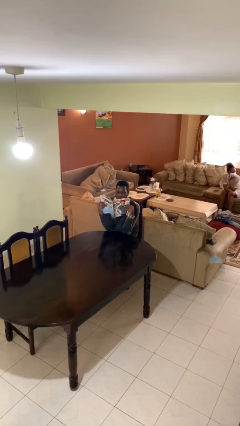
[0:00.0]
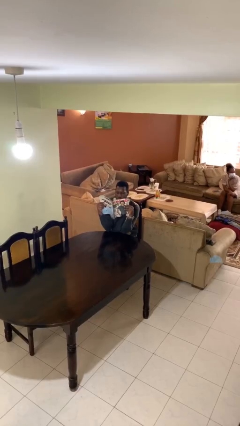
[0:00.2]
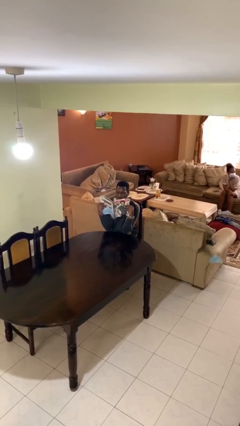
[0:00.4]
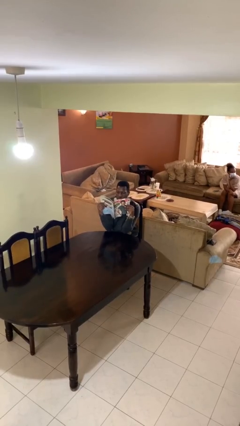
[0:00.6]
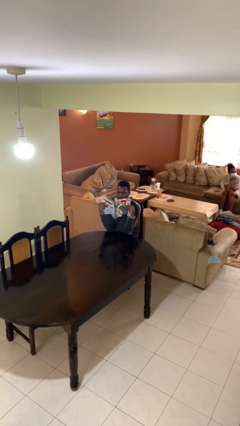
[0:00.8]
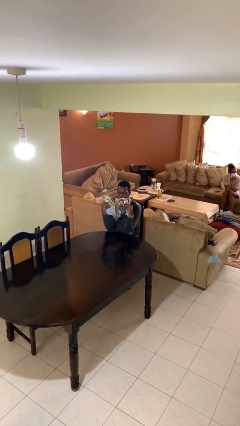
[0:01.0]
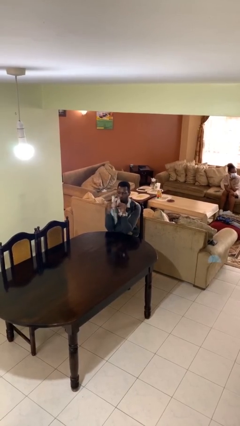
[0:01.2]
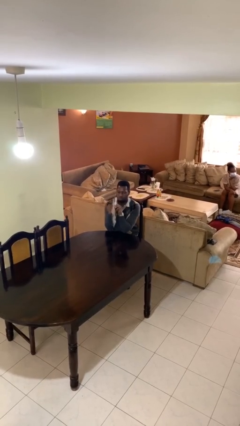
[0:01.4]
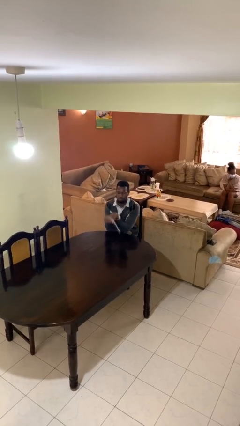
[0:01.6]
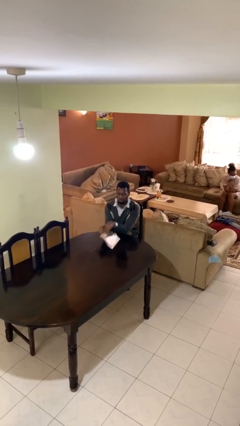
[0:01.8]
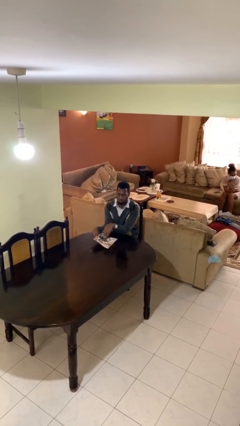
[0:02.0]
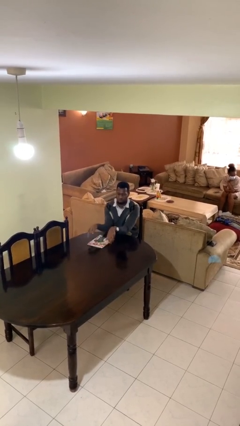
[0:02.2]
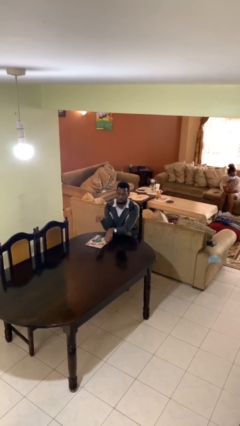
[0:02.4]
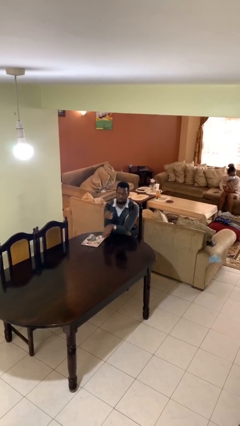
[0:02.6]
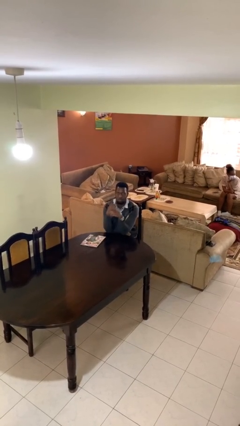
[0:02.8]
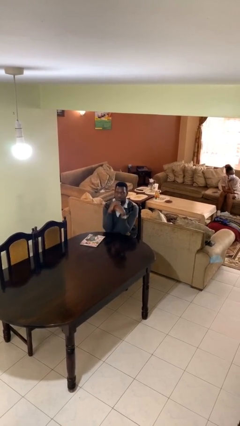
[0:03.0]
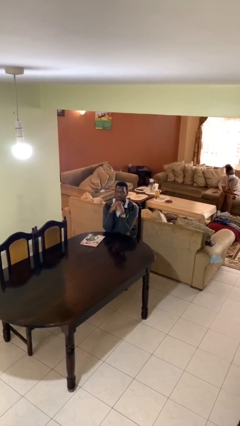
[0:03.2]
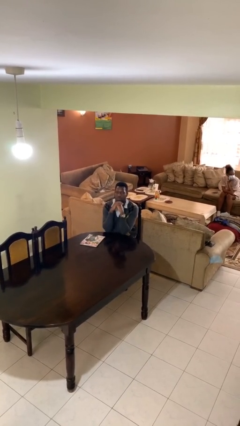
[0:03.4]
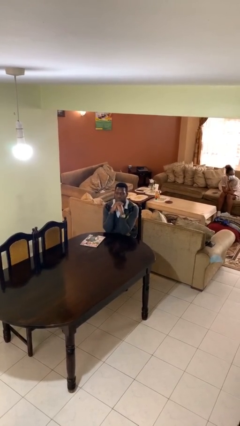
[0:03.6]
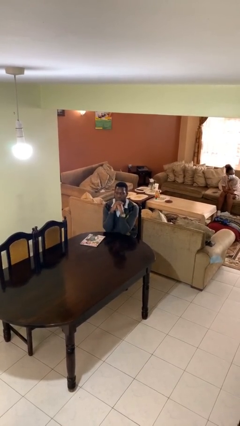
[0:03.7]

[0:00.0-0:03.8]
person puts down object on table

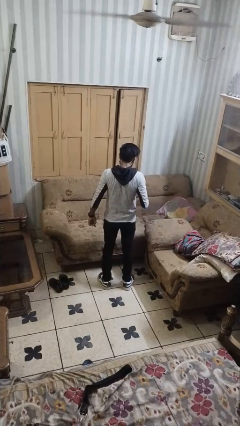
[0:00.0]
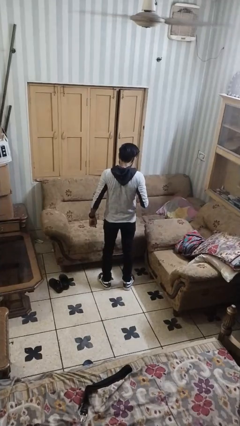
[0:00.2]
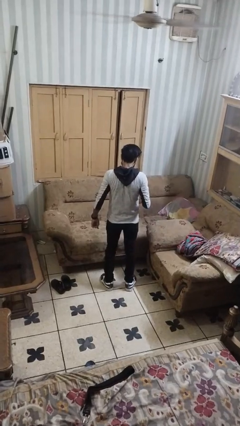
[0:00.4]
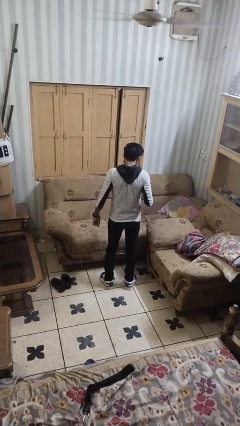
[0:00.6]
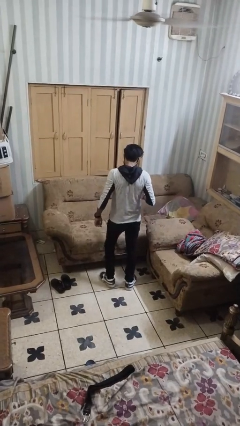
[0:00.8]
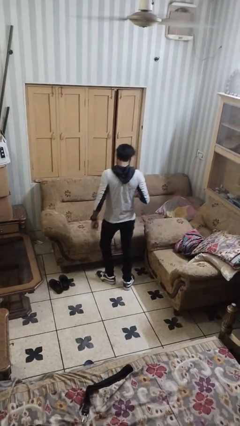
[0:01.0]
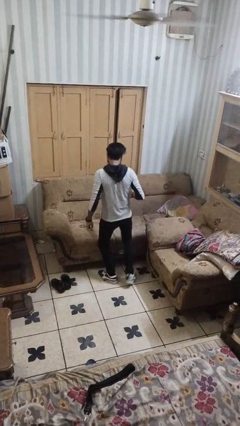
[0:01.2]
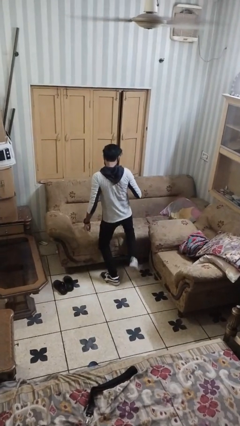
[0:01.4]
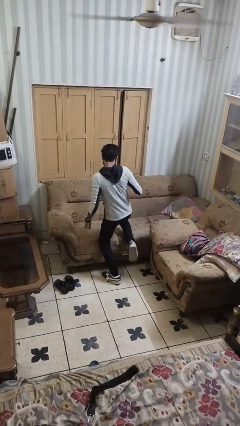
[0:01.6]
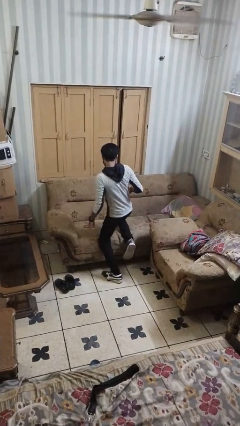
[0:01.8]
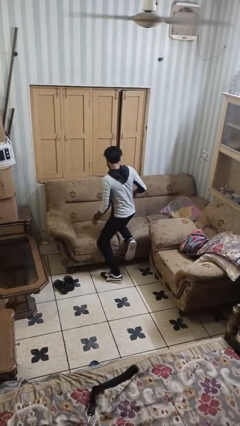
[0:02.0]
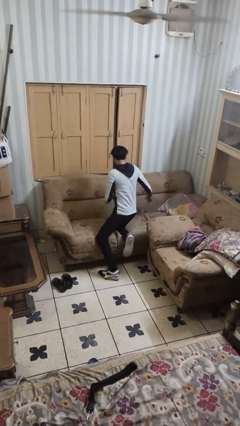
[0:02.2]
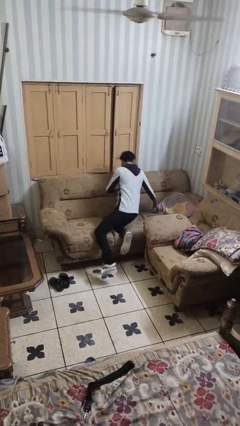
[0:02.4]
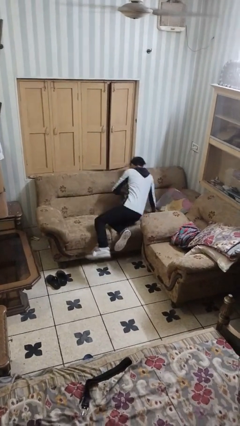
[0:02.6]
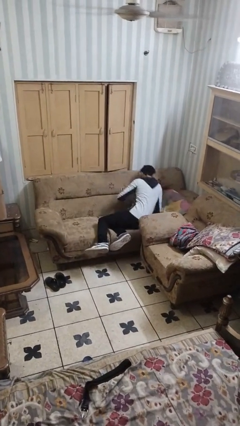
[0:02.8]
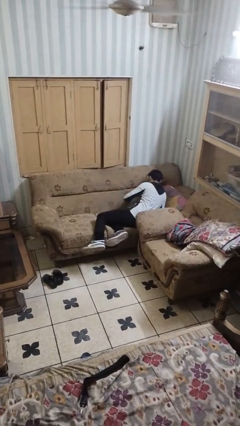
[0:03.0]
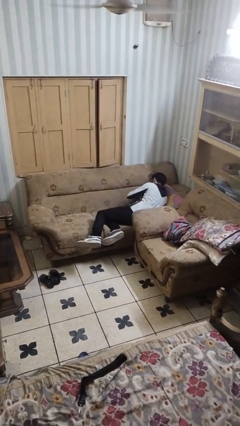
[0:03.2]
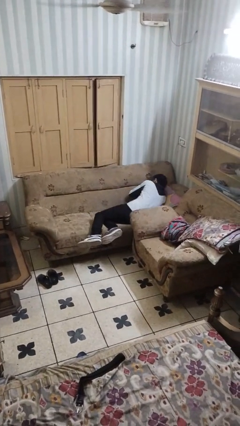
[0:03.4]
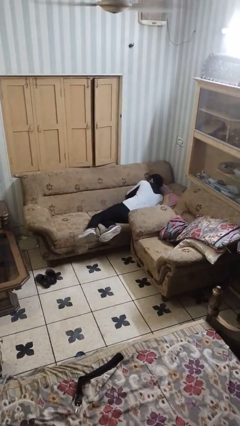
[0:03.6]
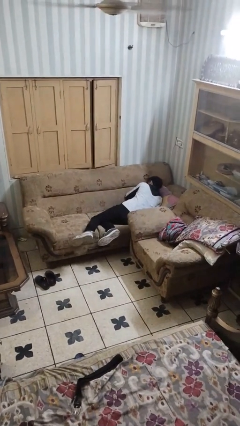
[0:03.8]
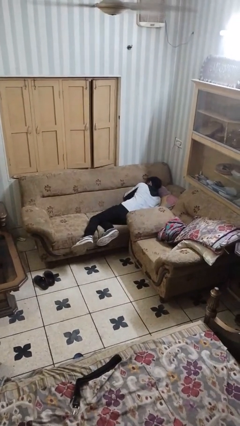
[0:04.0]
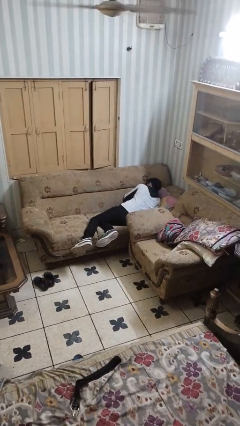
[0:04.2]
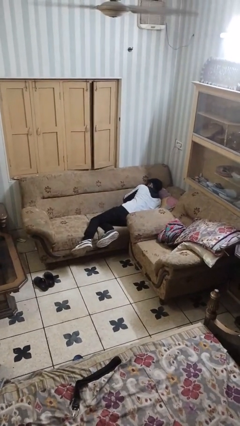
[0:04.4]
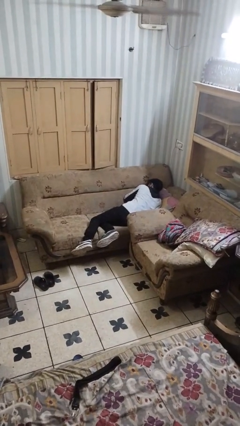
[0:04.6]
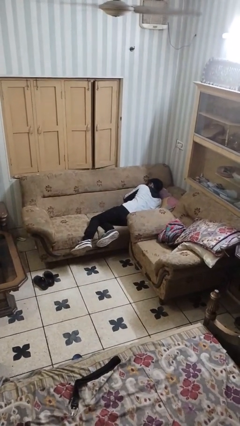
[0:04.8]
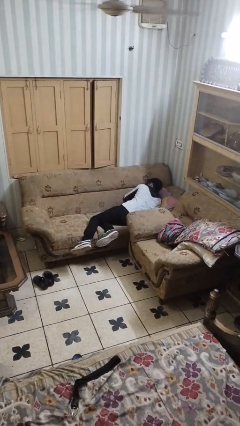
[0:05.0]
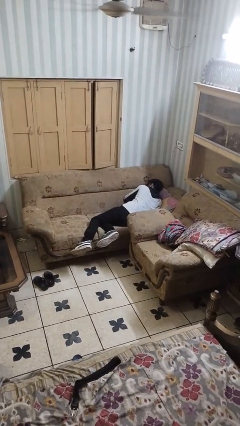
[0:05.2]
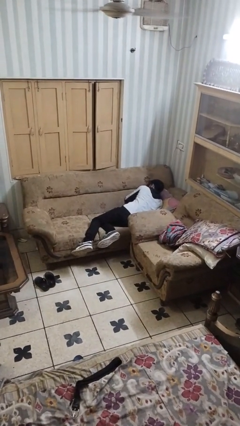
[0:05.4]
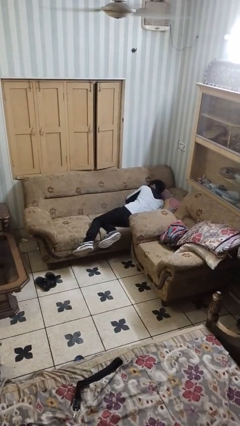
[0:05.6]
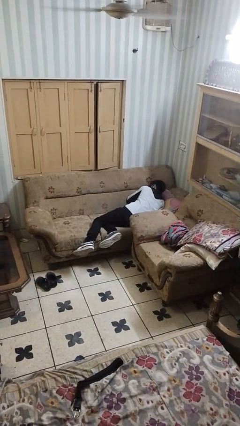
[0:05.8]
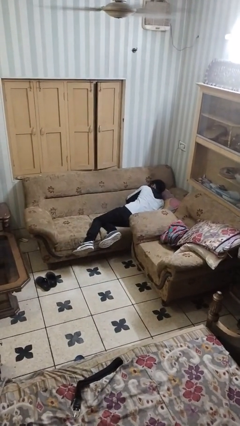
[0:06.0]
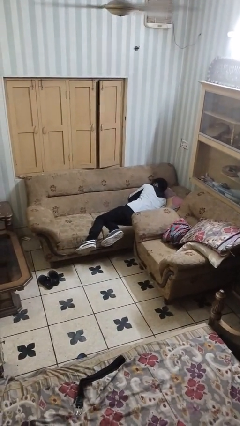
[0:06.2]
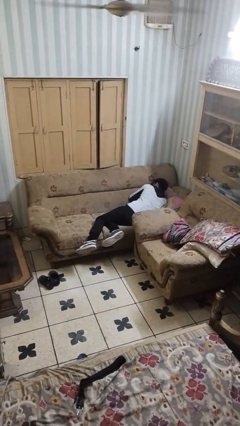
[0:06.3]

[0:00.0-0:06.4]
person lies down on couch

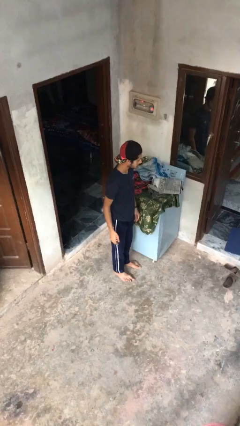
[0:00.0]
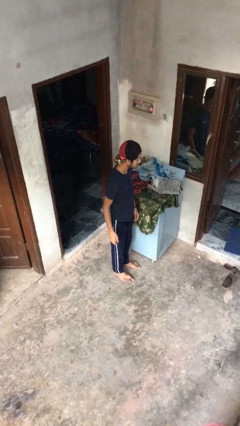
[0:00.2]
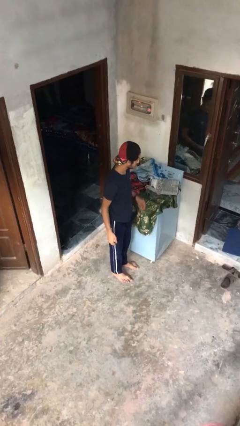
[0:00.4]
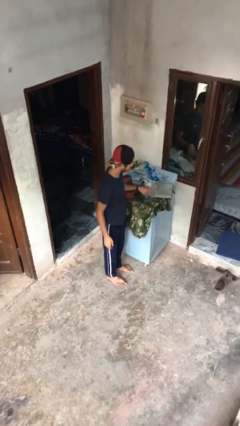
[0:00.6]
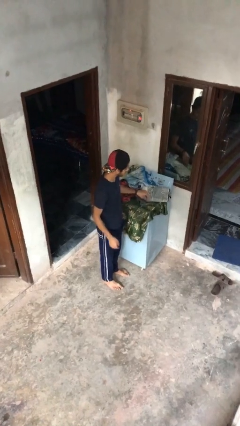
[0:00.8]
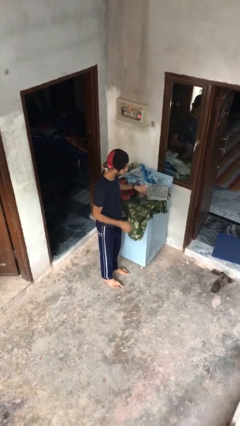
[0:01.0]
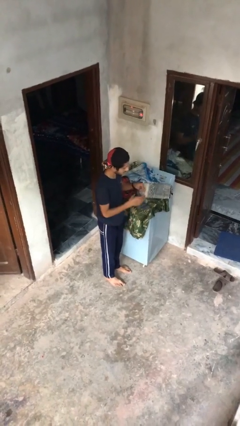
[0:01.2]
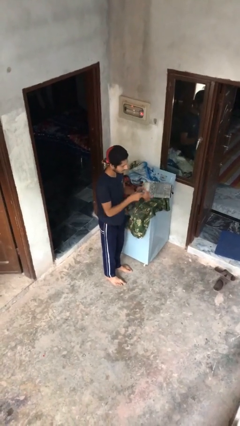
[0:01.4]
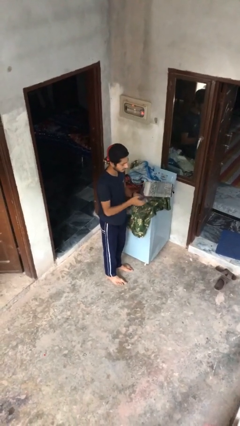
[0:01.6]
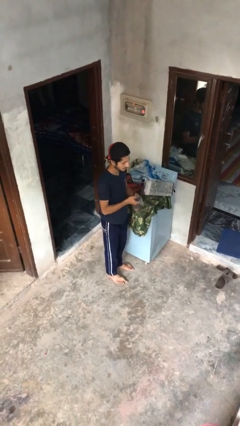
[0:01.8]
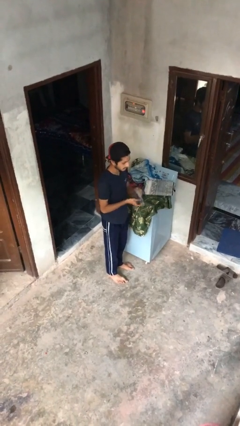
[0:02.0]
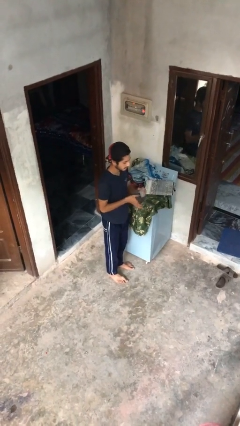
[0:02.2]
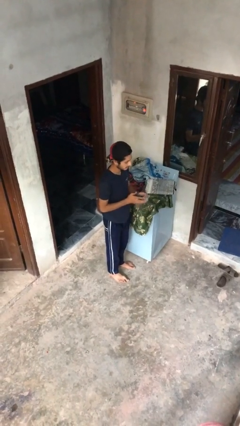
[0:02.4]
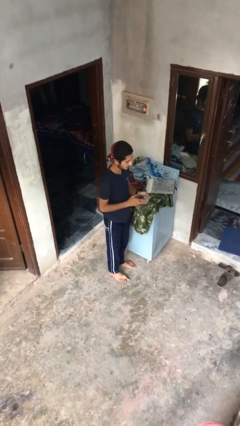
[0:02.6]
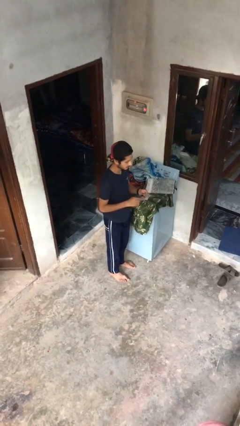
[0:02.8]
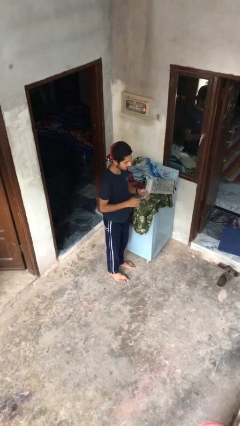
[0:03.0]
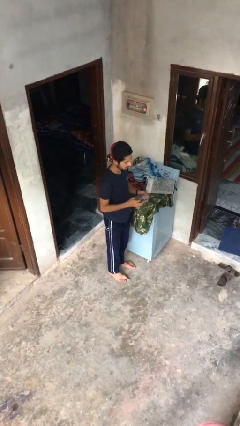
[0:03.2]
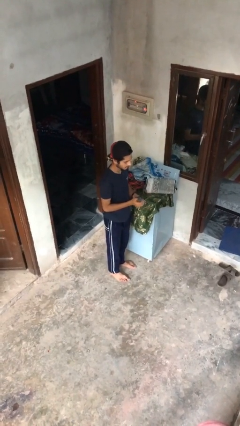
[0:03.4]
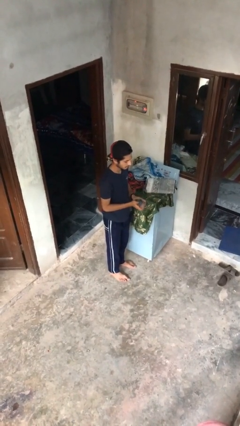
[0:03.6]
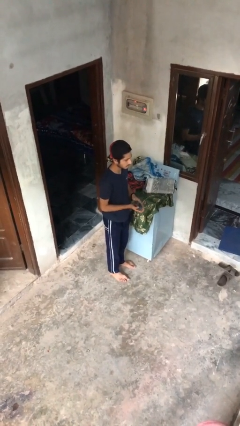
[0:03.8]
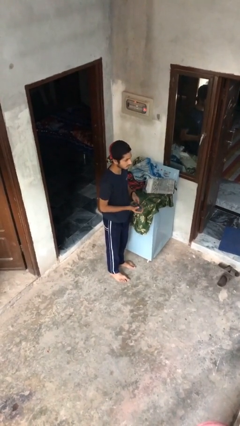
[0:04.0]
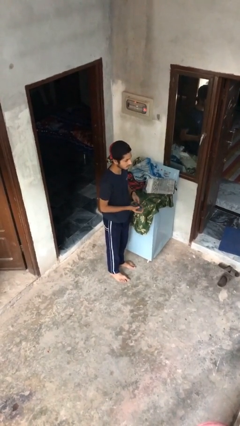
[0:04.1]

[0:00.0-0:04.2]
person folds socks

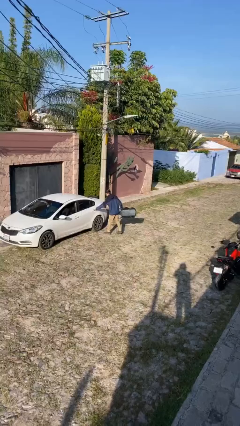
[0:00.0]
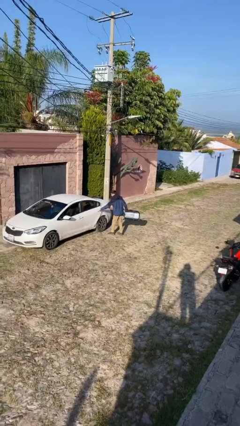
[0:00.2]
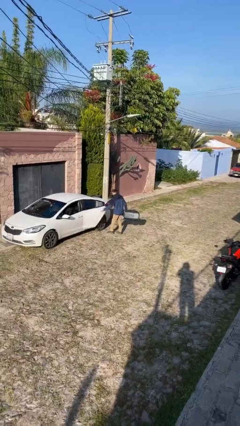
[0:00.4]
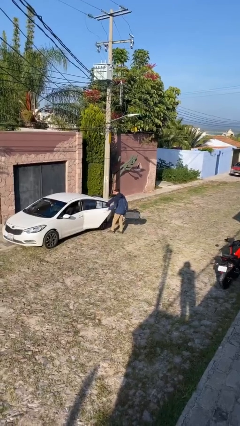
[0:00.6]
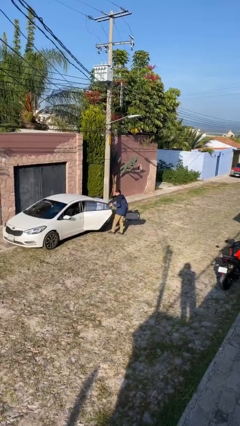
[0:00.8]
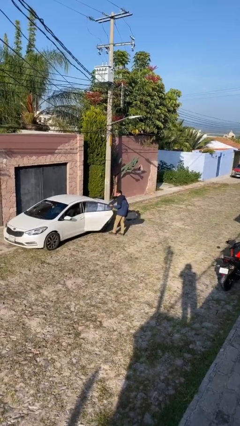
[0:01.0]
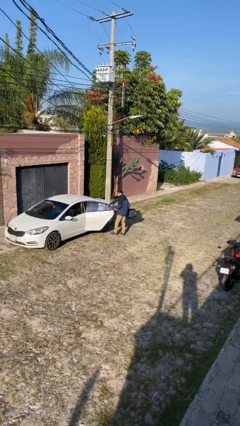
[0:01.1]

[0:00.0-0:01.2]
person opens car door

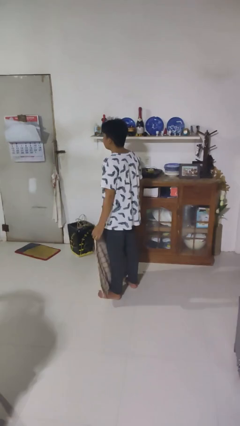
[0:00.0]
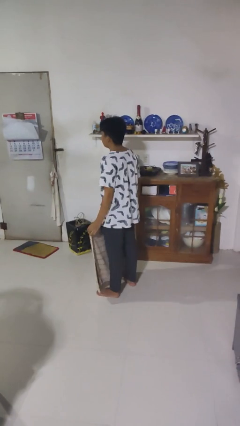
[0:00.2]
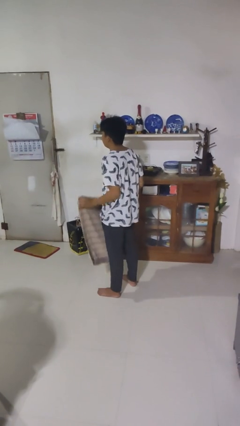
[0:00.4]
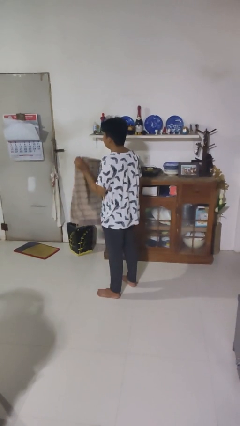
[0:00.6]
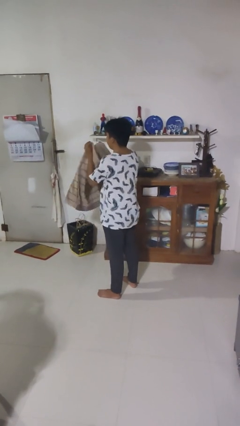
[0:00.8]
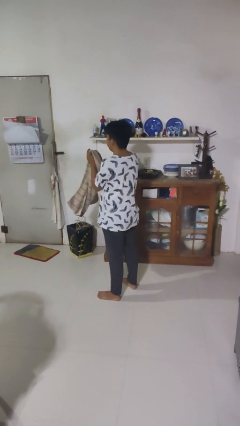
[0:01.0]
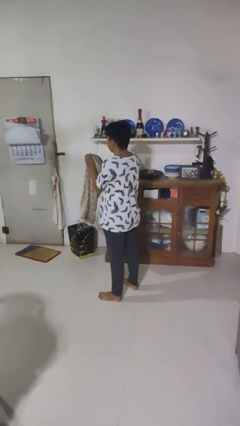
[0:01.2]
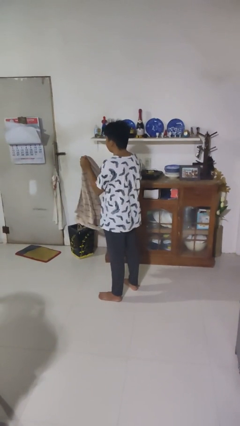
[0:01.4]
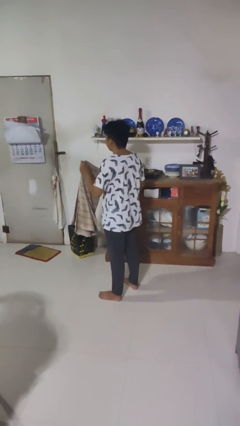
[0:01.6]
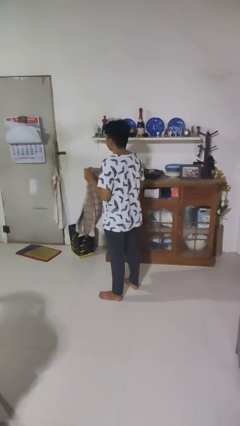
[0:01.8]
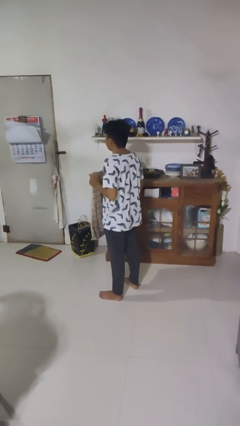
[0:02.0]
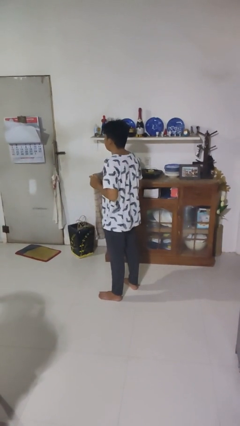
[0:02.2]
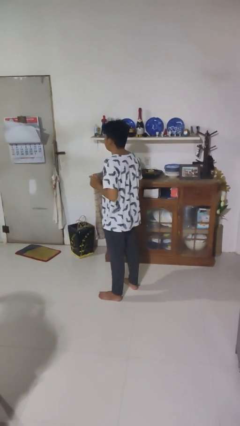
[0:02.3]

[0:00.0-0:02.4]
person folds blanket
